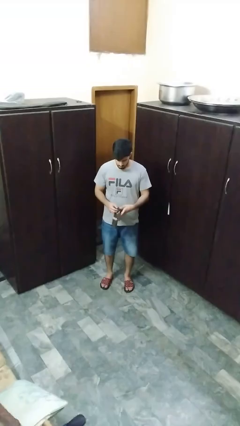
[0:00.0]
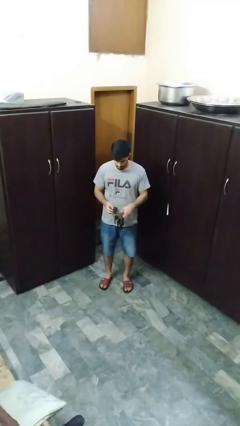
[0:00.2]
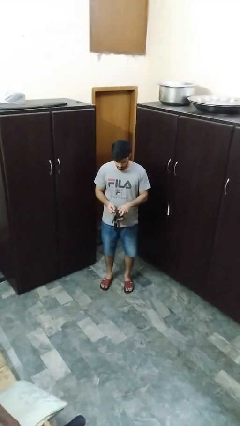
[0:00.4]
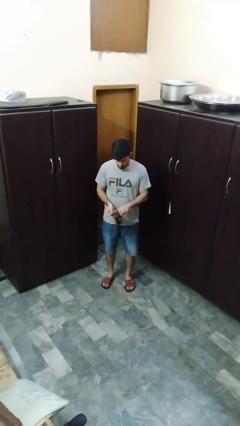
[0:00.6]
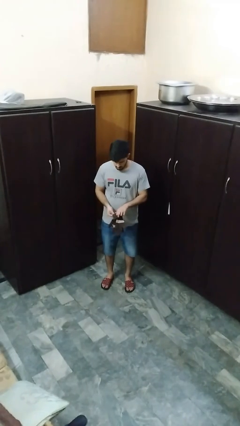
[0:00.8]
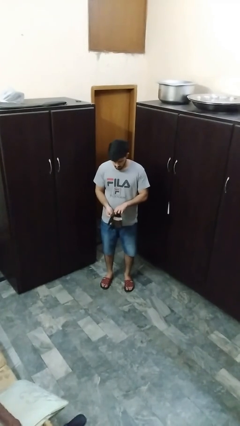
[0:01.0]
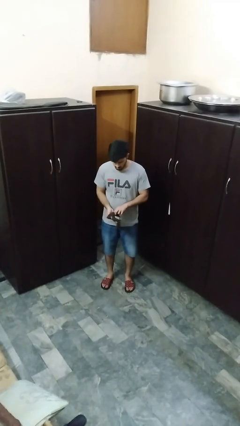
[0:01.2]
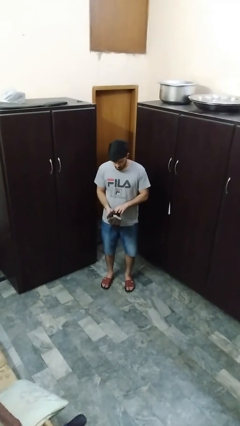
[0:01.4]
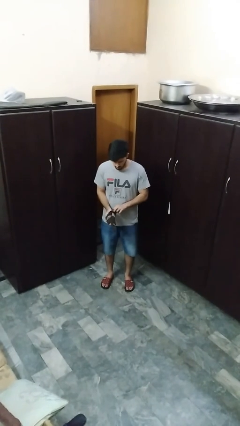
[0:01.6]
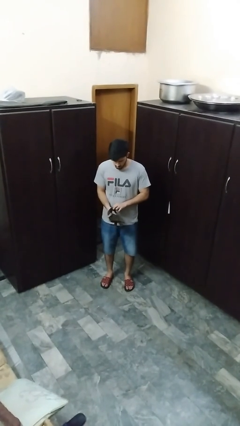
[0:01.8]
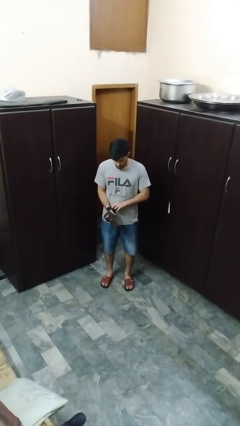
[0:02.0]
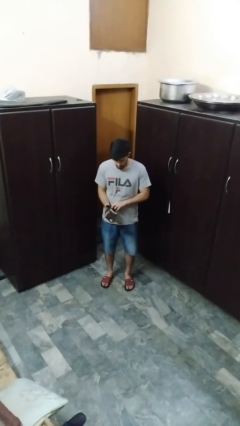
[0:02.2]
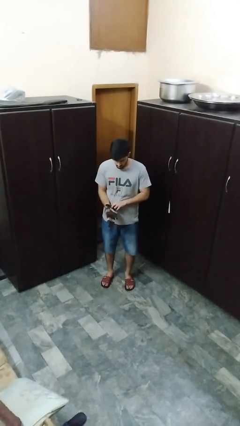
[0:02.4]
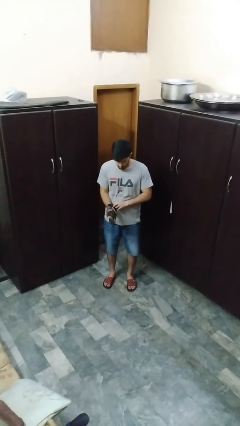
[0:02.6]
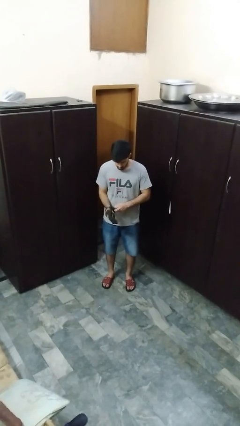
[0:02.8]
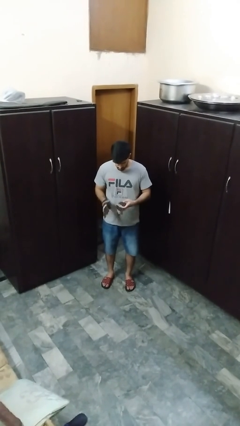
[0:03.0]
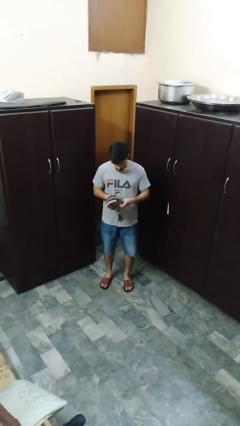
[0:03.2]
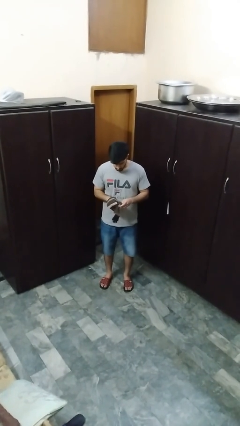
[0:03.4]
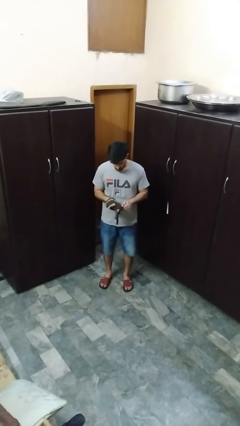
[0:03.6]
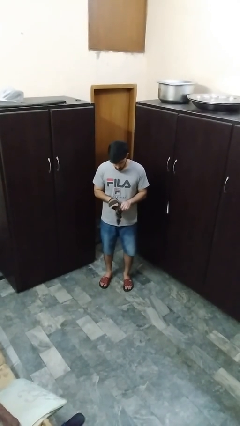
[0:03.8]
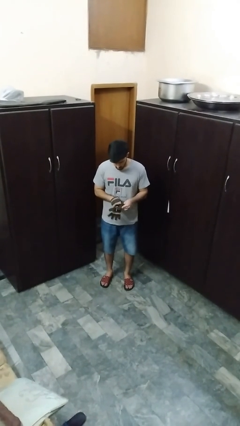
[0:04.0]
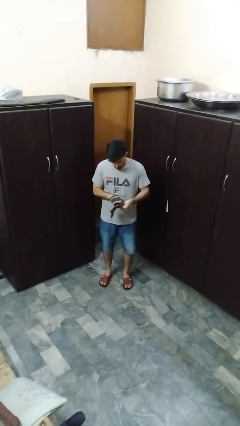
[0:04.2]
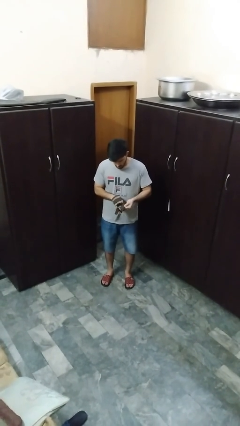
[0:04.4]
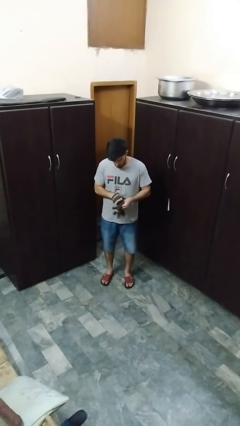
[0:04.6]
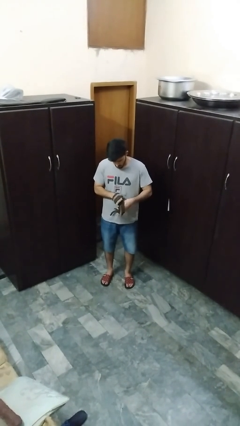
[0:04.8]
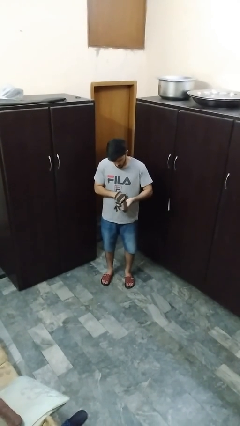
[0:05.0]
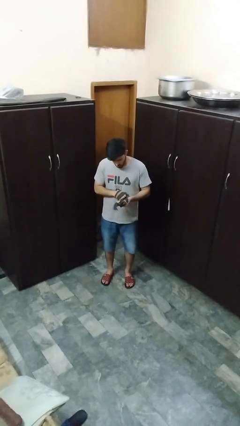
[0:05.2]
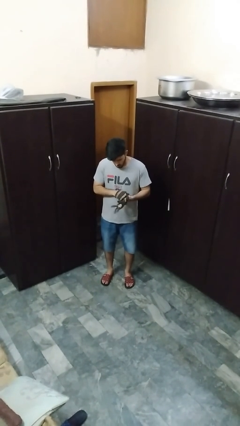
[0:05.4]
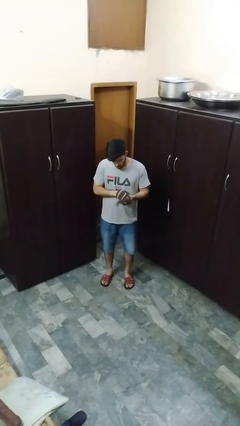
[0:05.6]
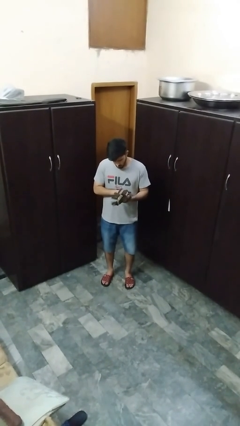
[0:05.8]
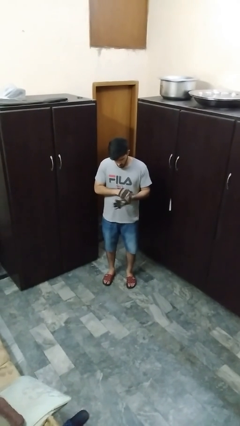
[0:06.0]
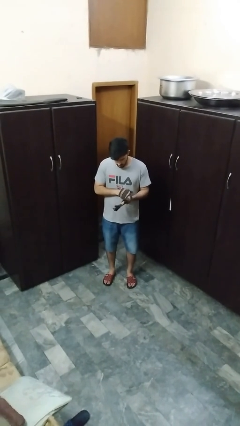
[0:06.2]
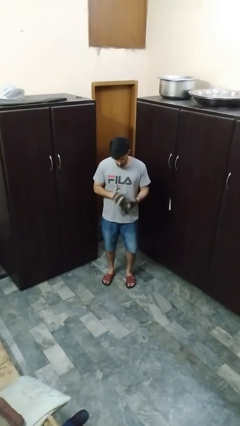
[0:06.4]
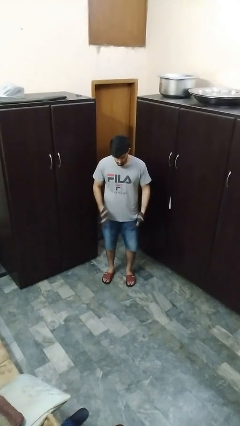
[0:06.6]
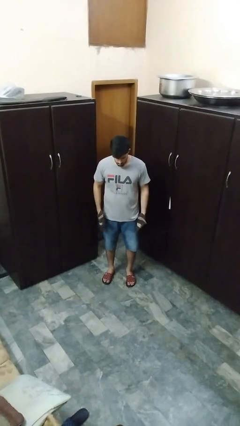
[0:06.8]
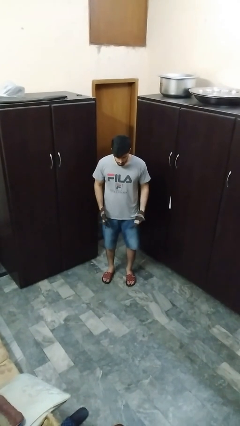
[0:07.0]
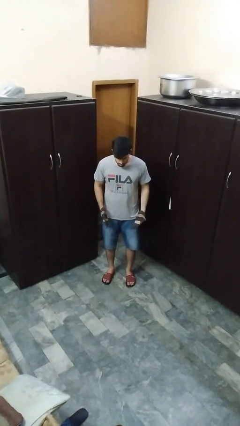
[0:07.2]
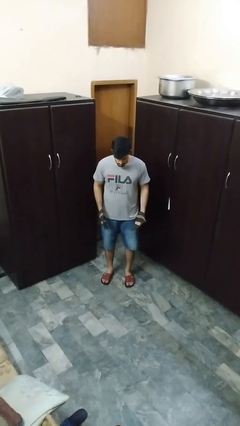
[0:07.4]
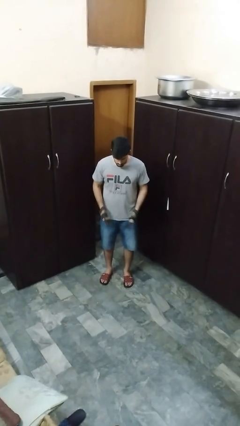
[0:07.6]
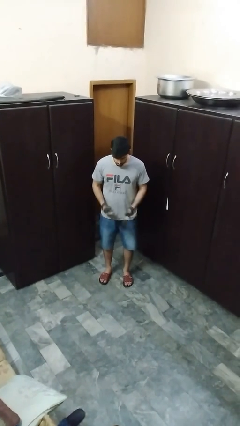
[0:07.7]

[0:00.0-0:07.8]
person puts on gloves

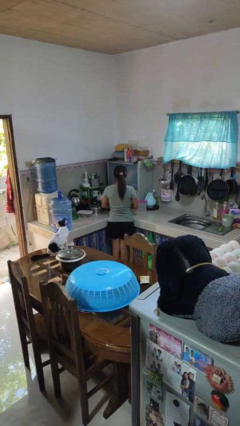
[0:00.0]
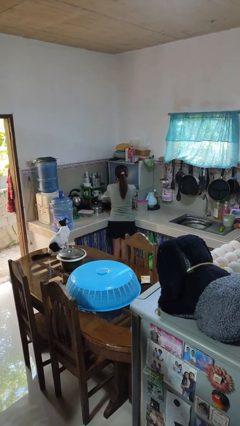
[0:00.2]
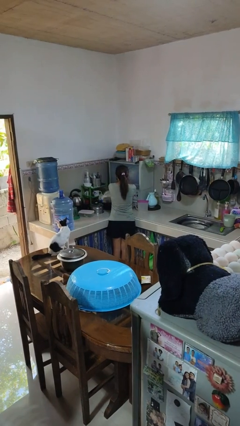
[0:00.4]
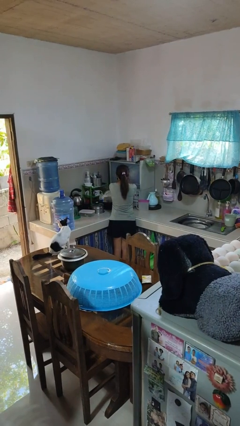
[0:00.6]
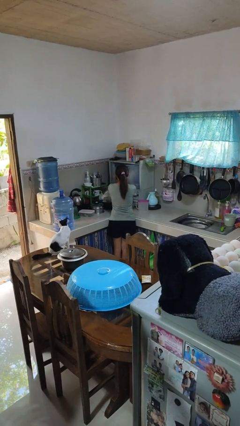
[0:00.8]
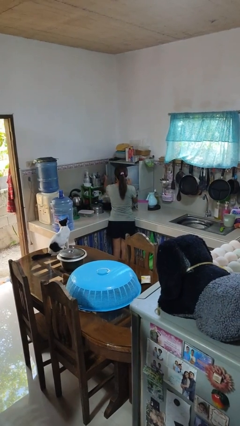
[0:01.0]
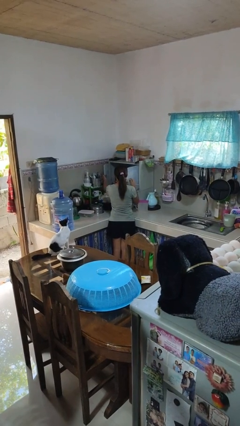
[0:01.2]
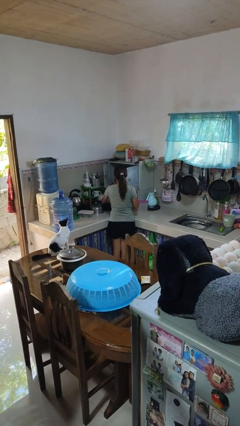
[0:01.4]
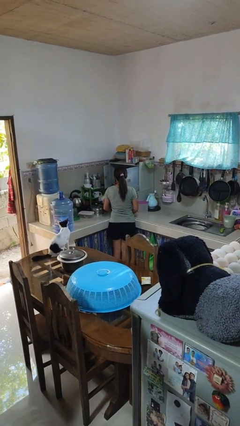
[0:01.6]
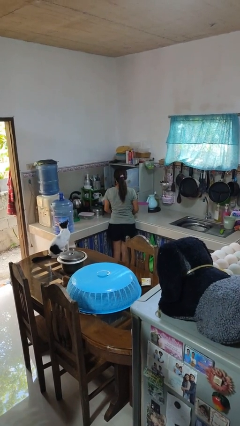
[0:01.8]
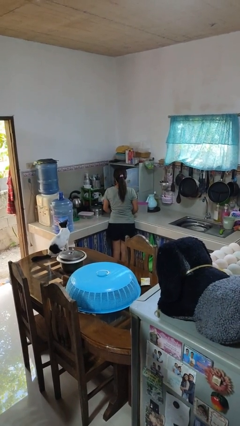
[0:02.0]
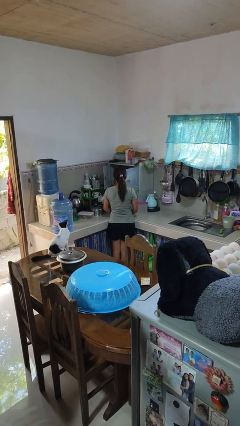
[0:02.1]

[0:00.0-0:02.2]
person opens kitchen drawer

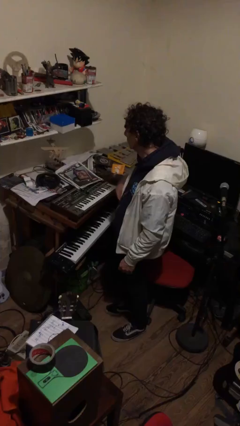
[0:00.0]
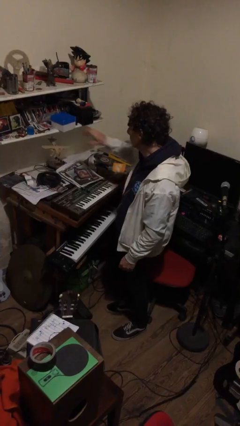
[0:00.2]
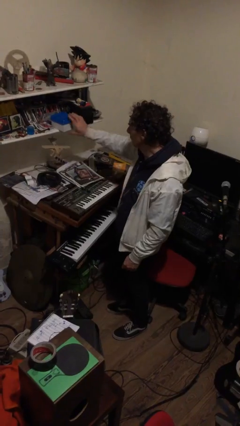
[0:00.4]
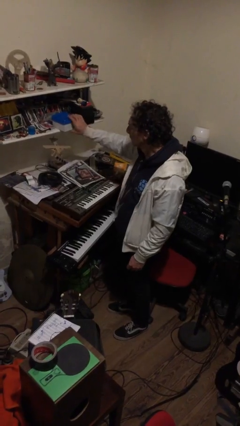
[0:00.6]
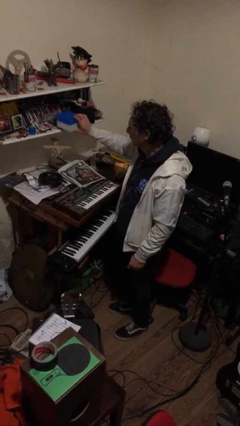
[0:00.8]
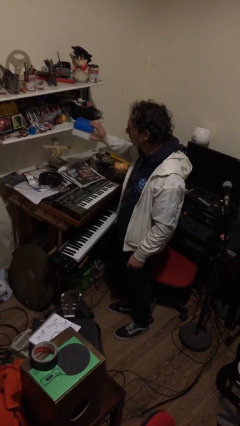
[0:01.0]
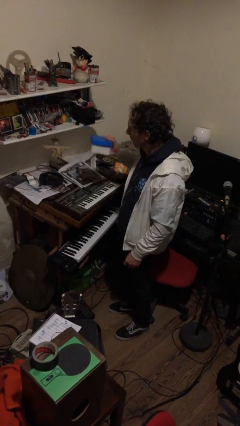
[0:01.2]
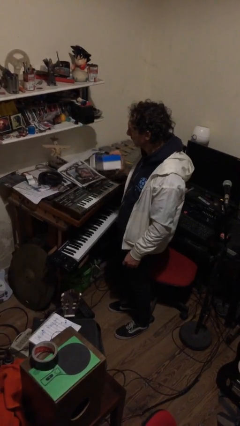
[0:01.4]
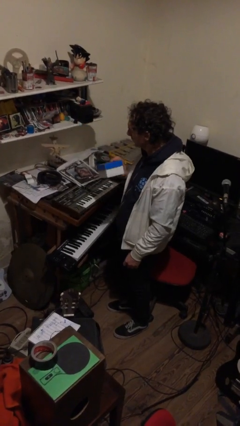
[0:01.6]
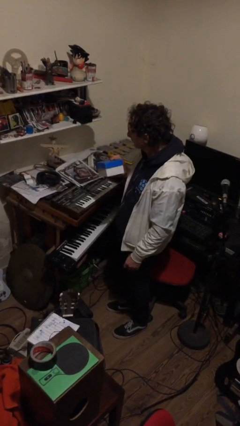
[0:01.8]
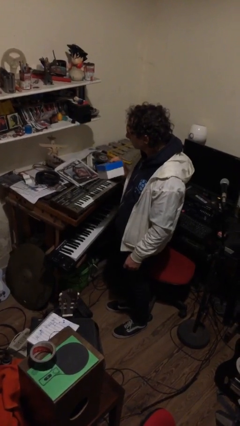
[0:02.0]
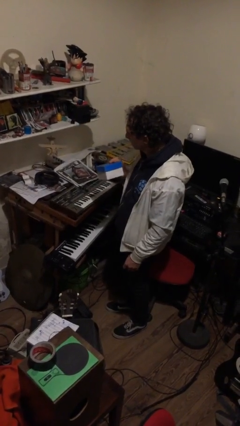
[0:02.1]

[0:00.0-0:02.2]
person picks up object from countertop

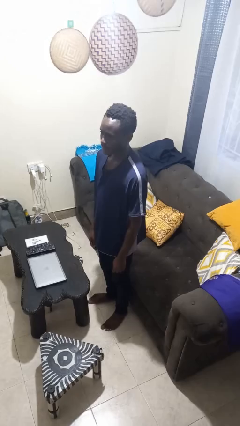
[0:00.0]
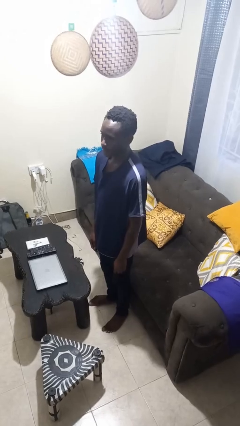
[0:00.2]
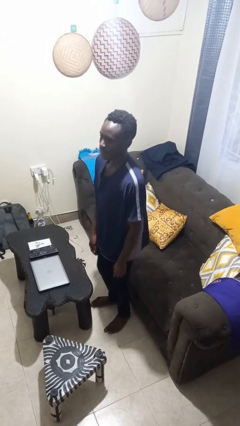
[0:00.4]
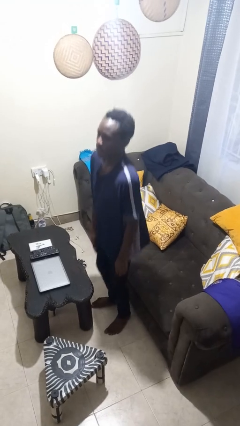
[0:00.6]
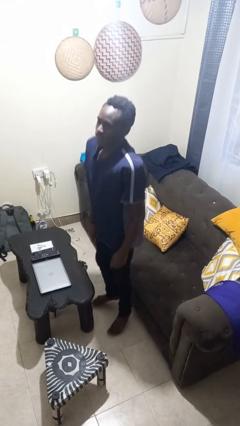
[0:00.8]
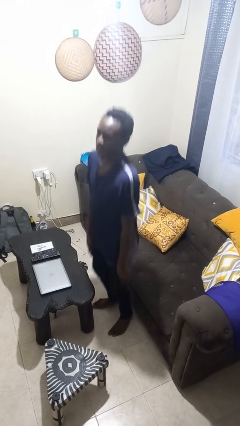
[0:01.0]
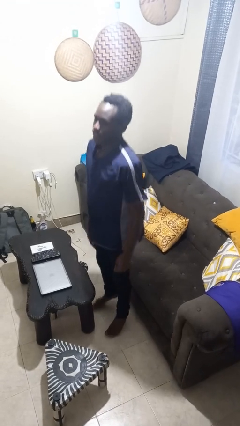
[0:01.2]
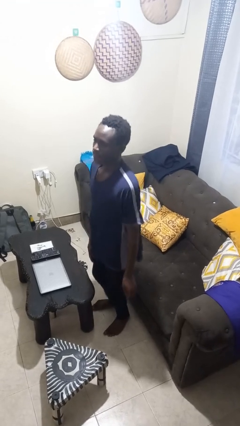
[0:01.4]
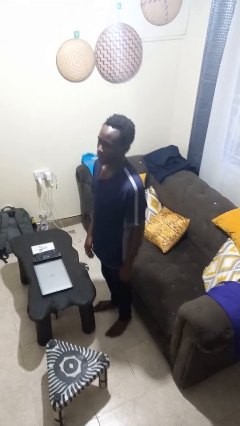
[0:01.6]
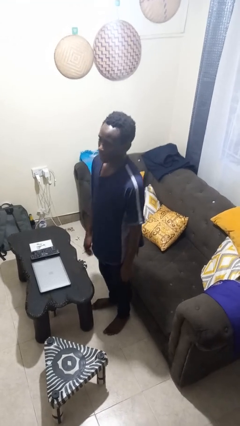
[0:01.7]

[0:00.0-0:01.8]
person jumps

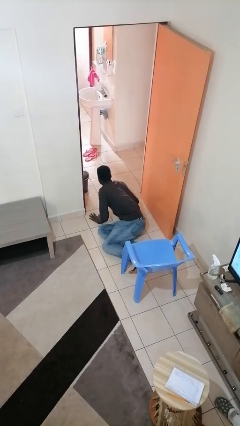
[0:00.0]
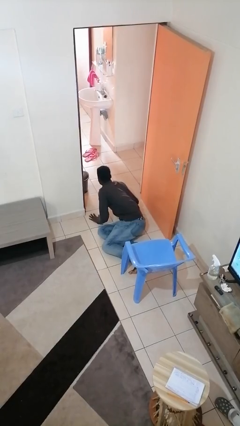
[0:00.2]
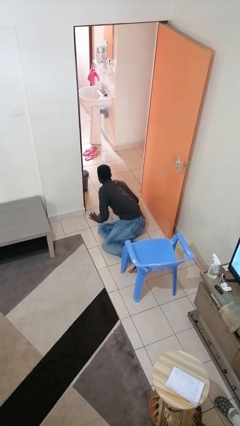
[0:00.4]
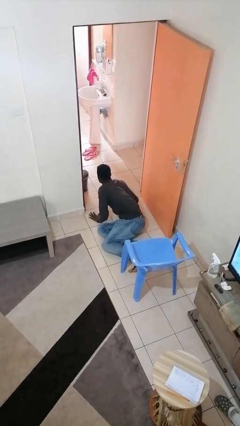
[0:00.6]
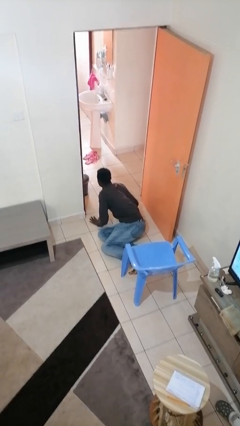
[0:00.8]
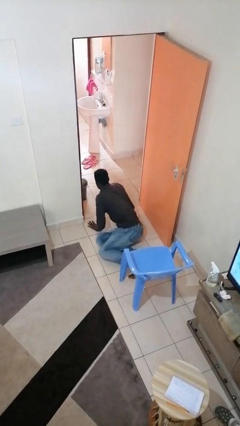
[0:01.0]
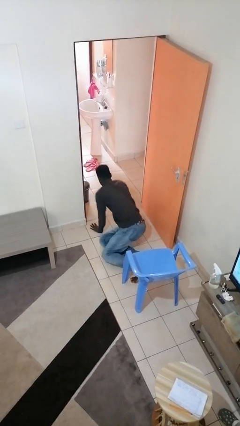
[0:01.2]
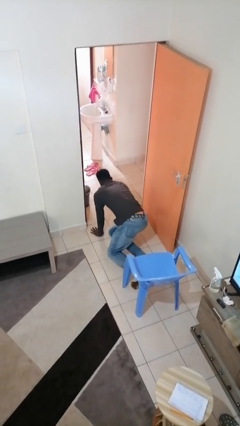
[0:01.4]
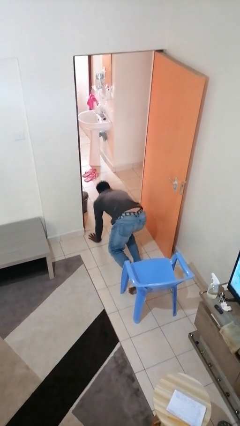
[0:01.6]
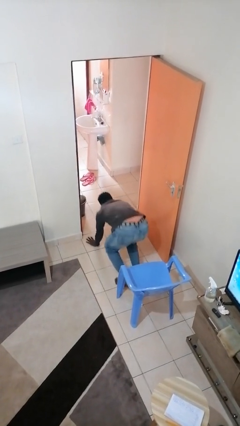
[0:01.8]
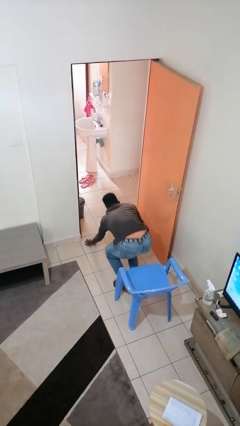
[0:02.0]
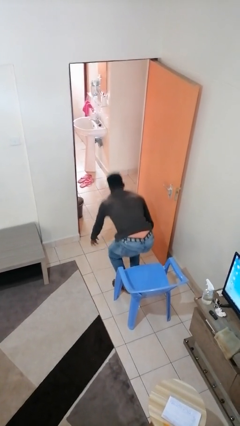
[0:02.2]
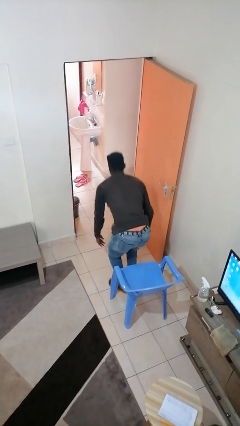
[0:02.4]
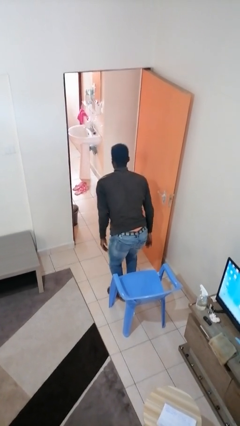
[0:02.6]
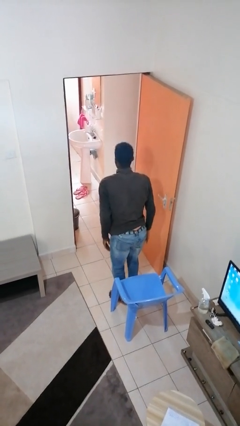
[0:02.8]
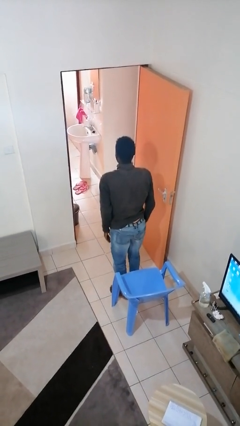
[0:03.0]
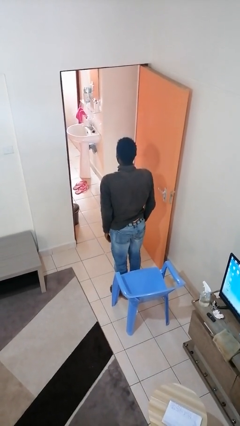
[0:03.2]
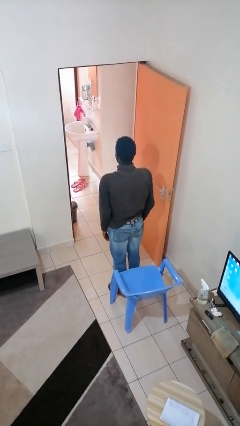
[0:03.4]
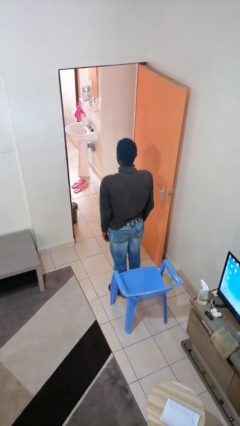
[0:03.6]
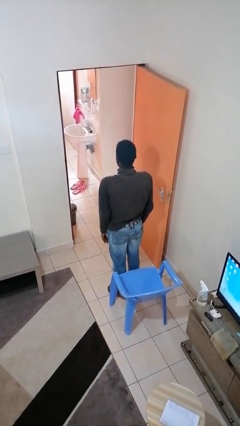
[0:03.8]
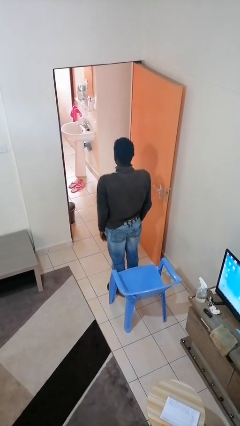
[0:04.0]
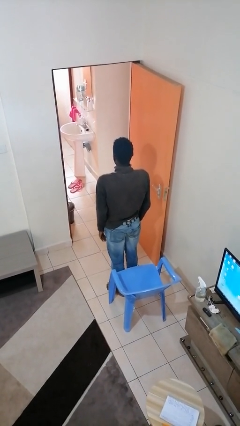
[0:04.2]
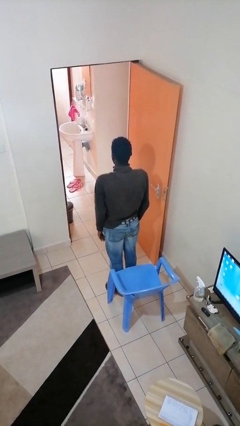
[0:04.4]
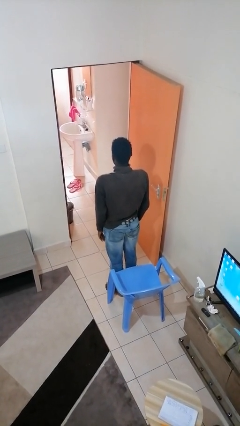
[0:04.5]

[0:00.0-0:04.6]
person stands up from floor
